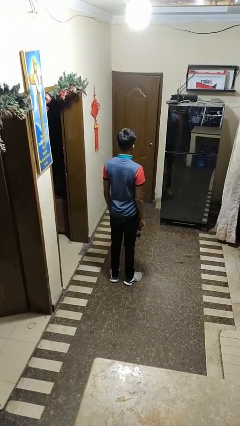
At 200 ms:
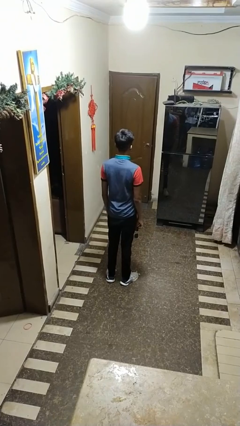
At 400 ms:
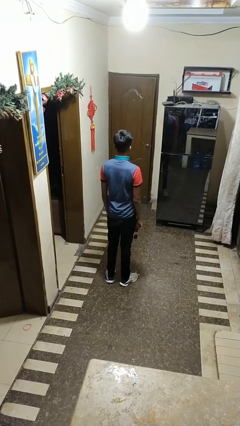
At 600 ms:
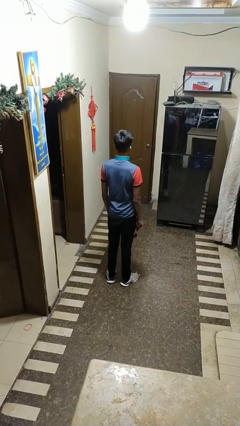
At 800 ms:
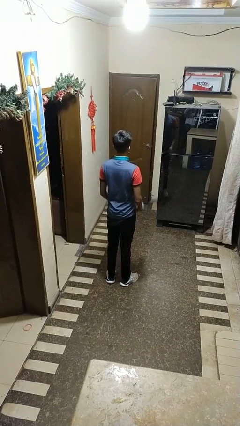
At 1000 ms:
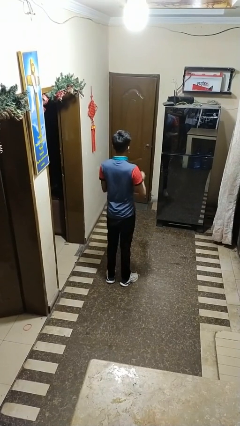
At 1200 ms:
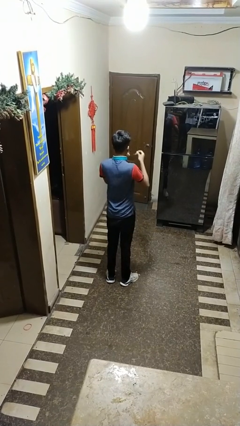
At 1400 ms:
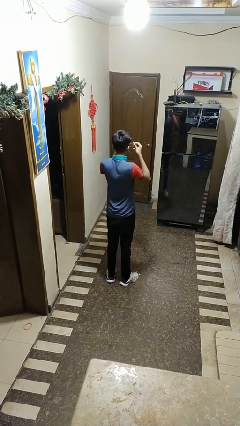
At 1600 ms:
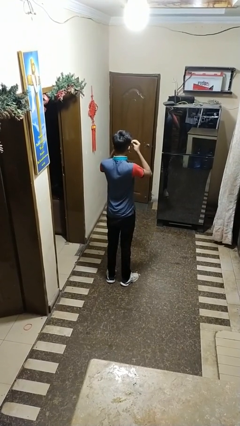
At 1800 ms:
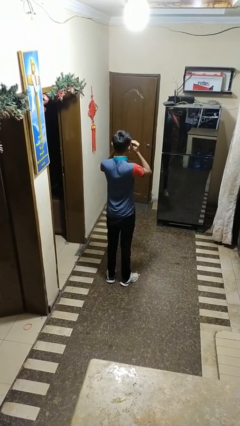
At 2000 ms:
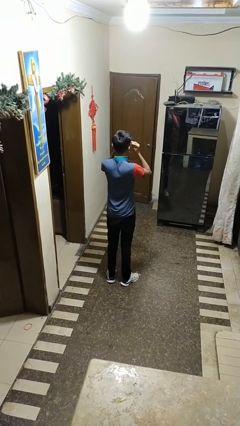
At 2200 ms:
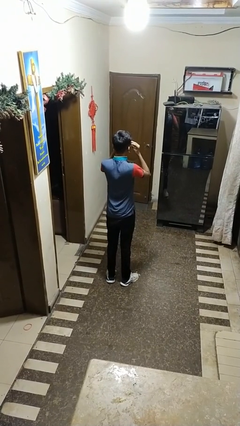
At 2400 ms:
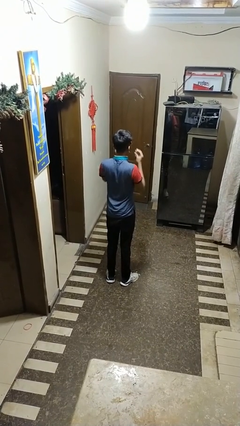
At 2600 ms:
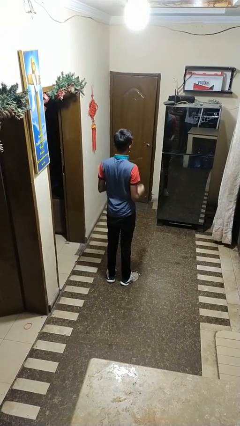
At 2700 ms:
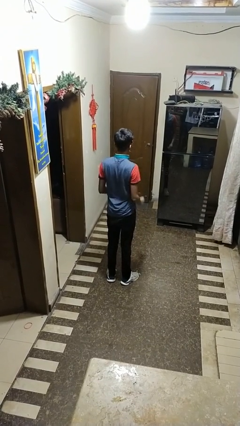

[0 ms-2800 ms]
person puts on sunglasses

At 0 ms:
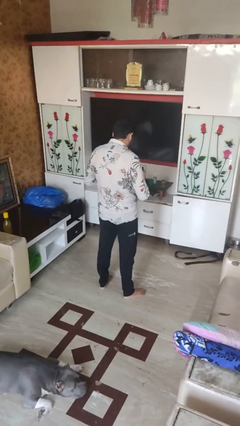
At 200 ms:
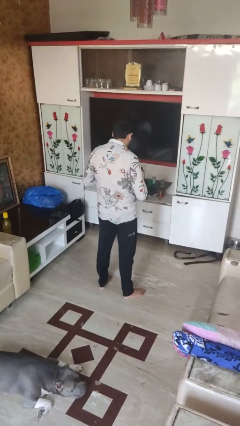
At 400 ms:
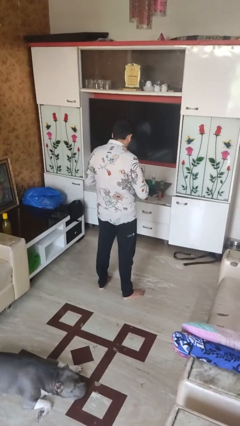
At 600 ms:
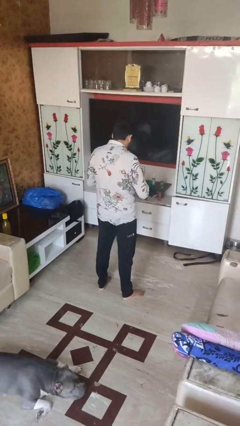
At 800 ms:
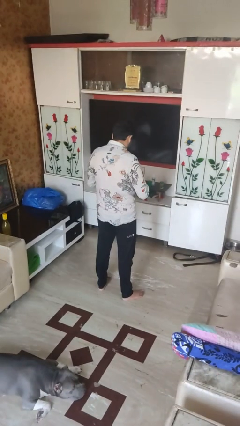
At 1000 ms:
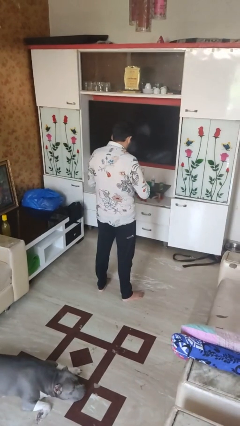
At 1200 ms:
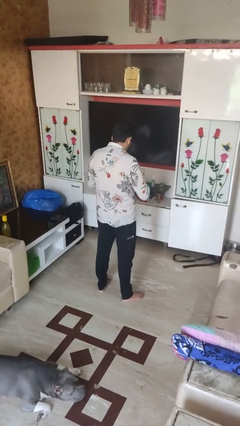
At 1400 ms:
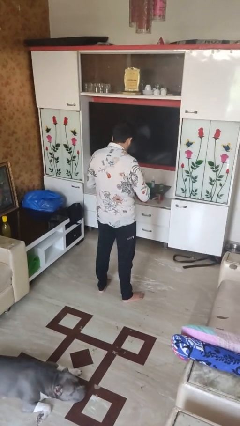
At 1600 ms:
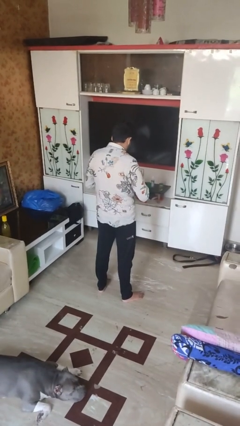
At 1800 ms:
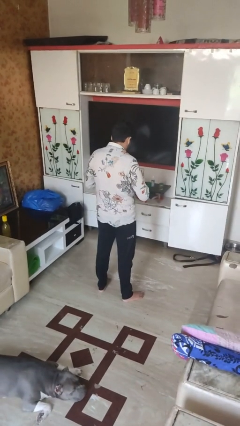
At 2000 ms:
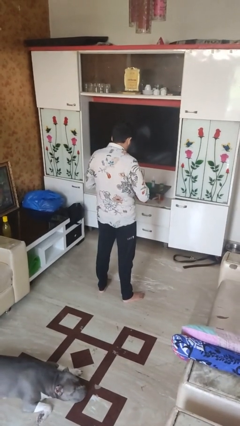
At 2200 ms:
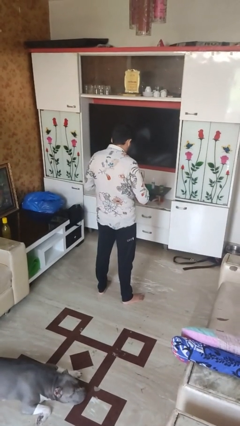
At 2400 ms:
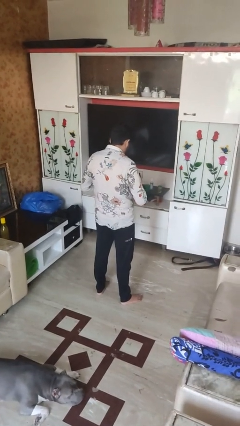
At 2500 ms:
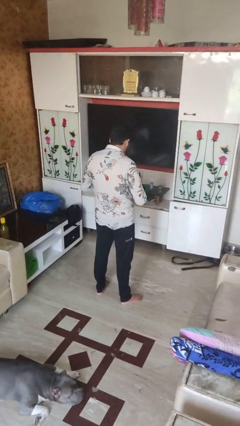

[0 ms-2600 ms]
person unbuttons shirt

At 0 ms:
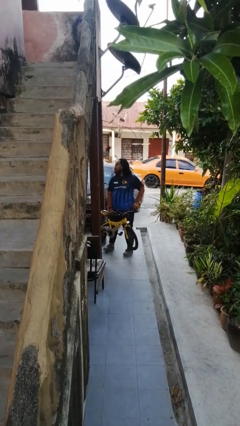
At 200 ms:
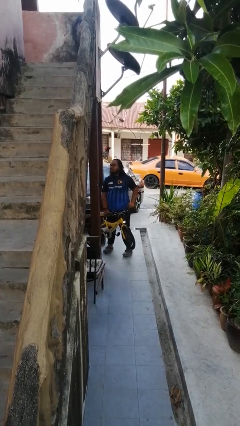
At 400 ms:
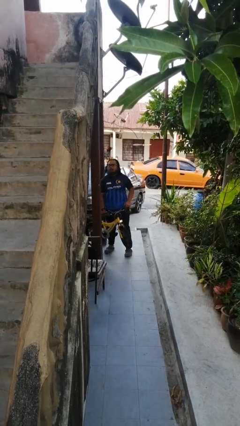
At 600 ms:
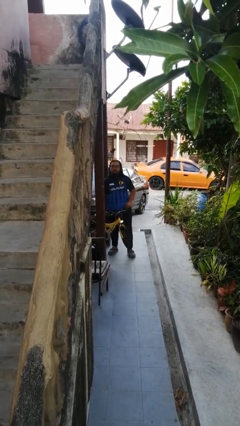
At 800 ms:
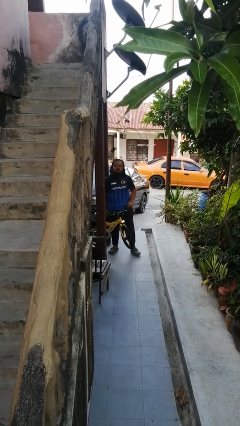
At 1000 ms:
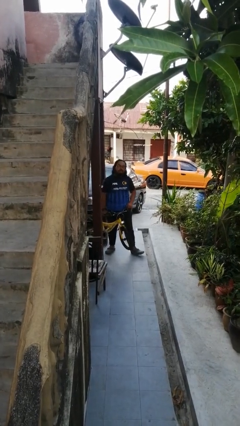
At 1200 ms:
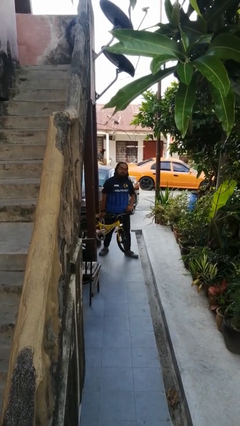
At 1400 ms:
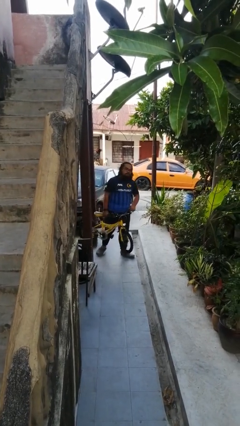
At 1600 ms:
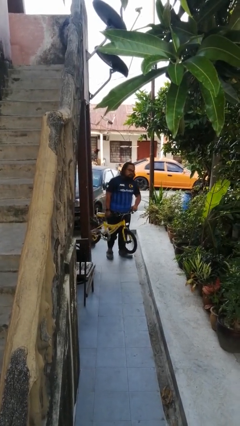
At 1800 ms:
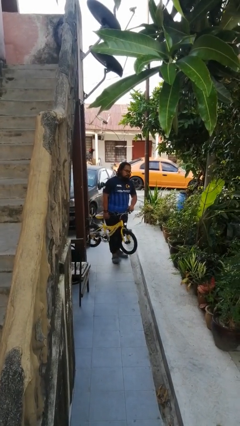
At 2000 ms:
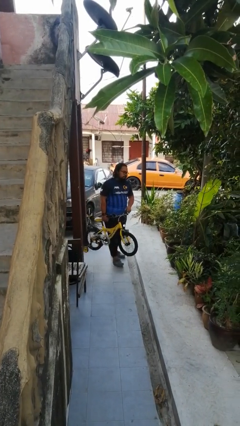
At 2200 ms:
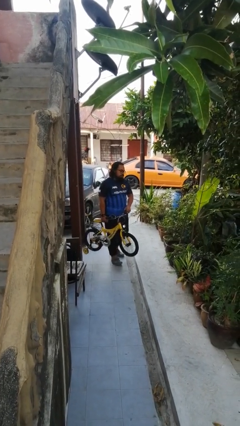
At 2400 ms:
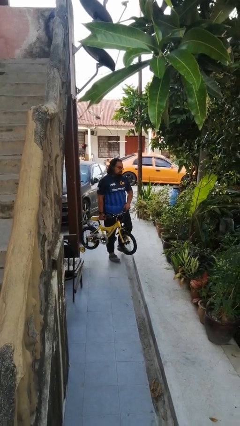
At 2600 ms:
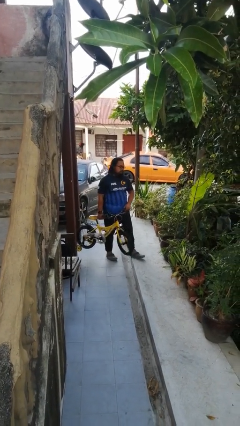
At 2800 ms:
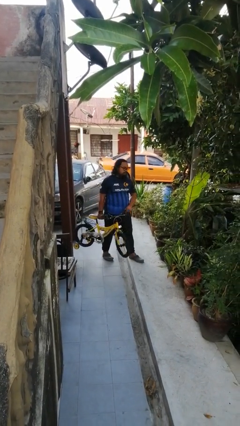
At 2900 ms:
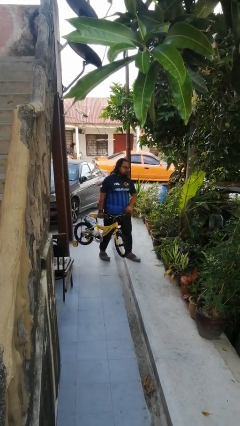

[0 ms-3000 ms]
person carries bicycle

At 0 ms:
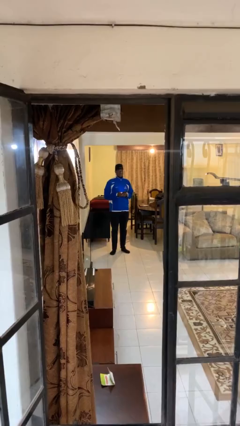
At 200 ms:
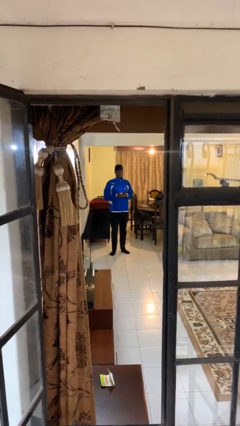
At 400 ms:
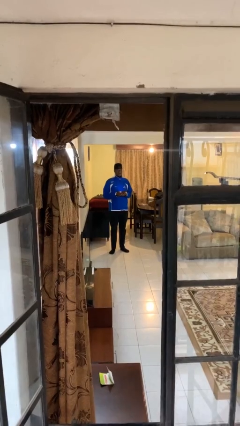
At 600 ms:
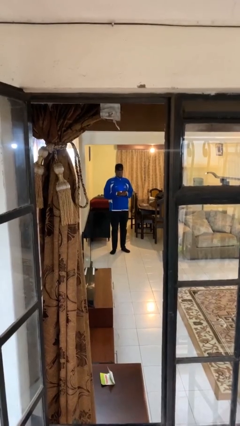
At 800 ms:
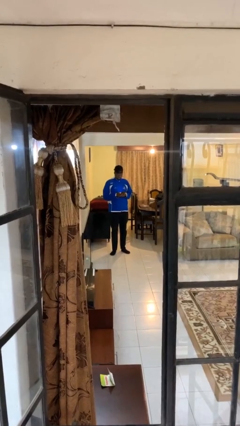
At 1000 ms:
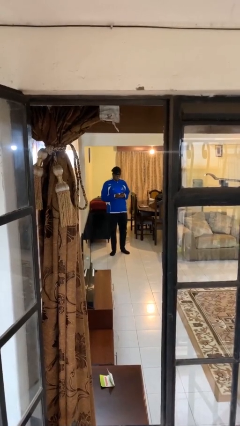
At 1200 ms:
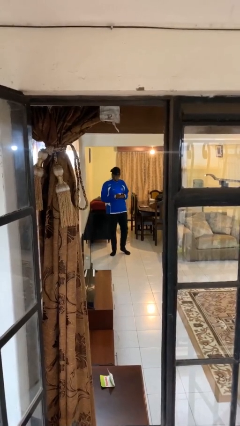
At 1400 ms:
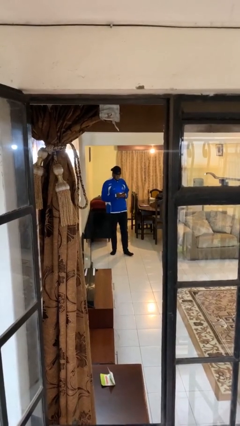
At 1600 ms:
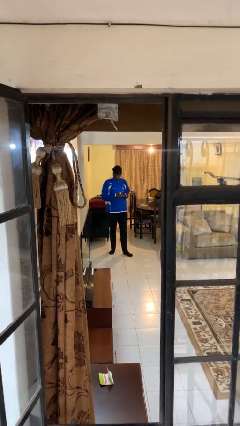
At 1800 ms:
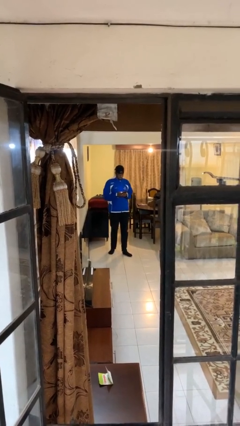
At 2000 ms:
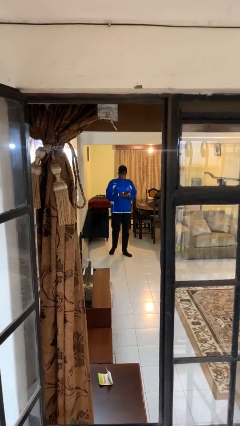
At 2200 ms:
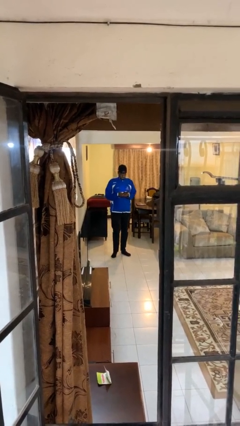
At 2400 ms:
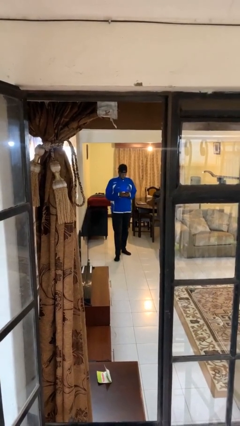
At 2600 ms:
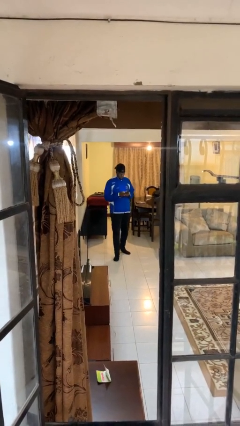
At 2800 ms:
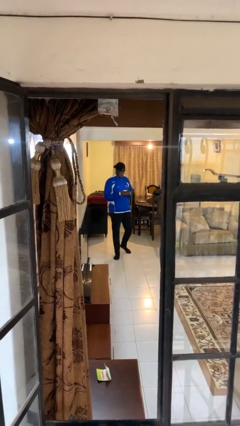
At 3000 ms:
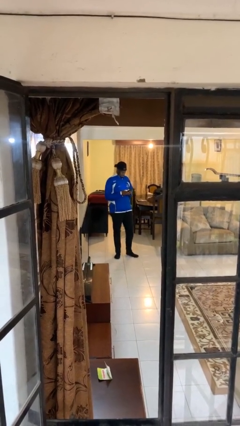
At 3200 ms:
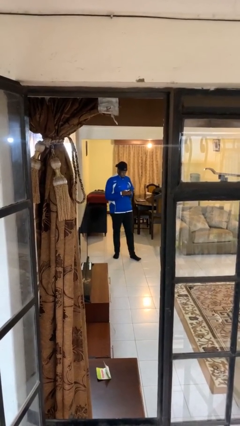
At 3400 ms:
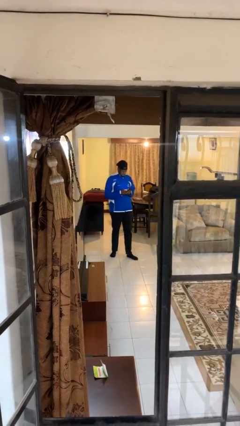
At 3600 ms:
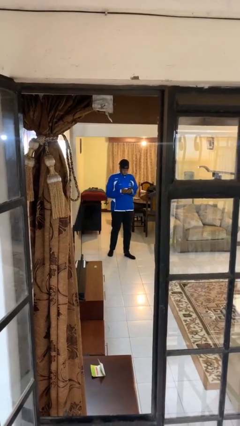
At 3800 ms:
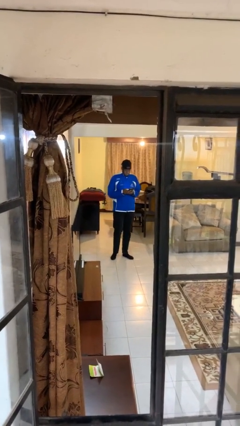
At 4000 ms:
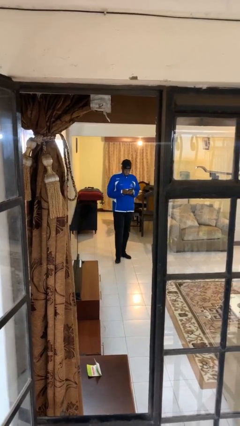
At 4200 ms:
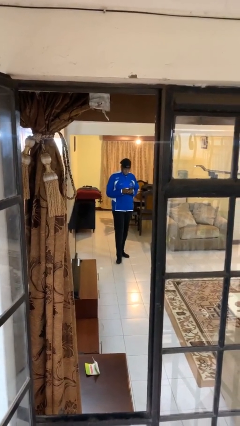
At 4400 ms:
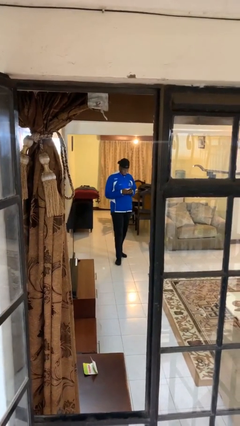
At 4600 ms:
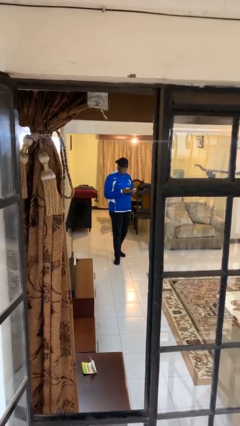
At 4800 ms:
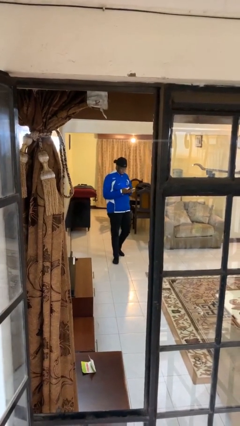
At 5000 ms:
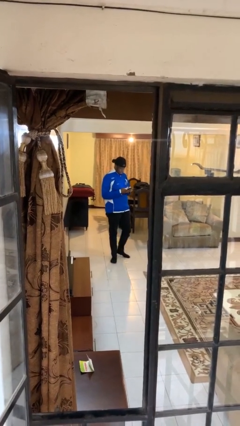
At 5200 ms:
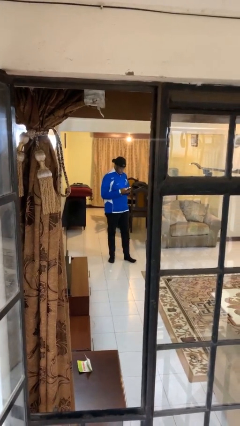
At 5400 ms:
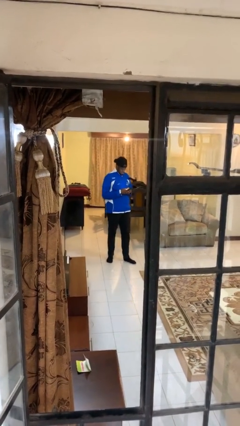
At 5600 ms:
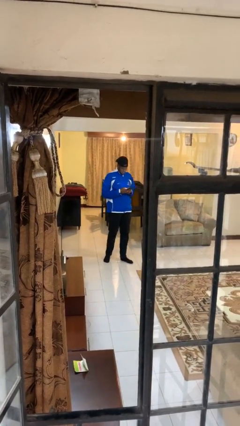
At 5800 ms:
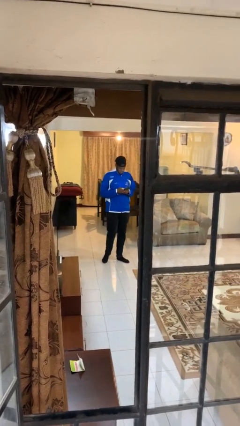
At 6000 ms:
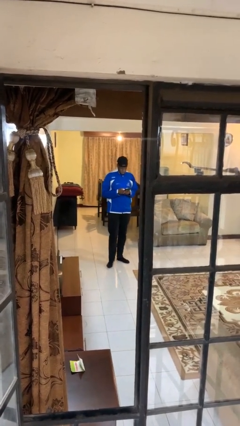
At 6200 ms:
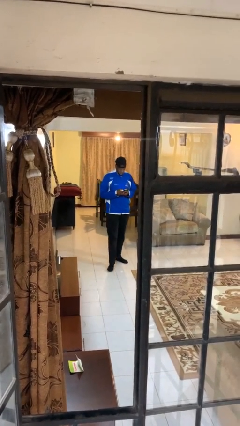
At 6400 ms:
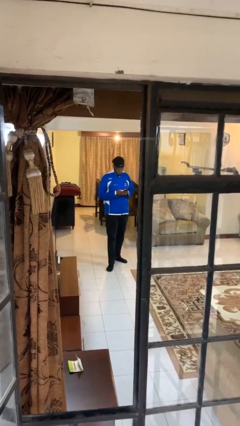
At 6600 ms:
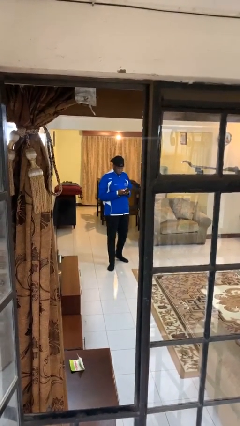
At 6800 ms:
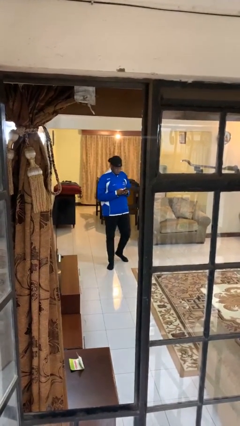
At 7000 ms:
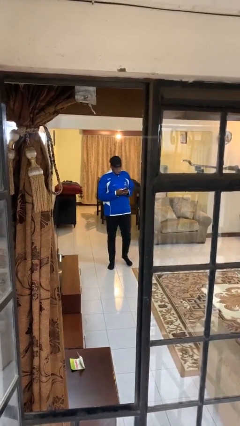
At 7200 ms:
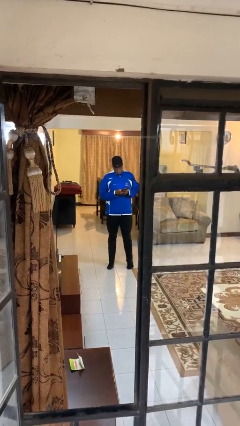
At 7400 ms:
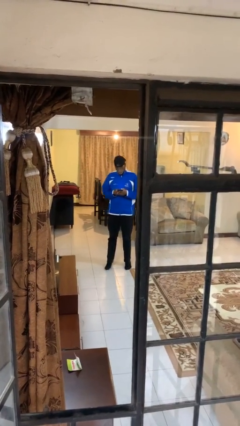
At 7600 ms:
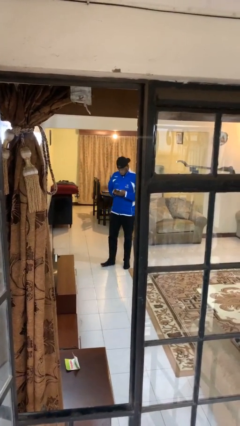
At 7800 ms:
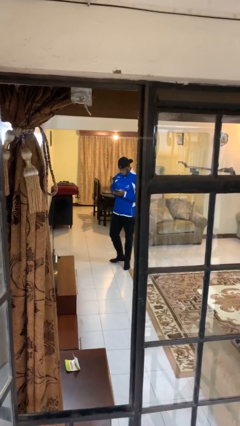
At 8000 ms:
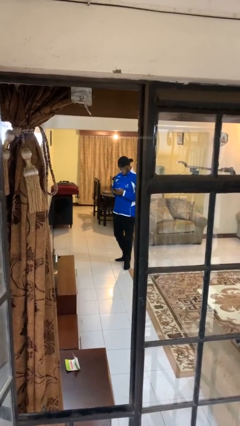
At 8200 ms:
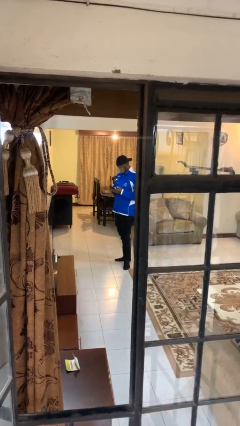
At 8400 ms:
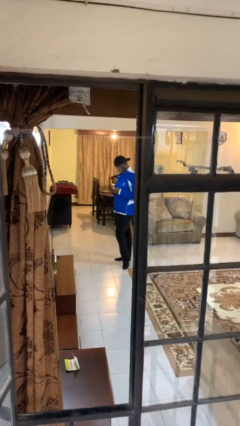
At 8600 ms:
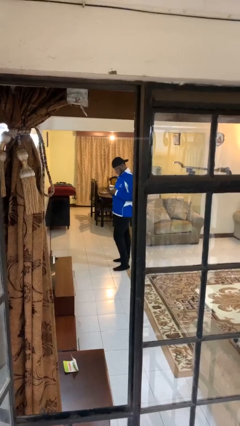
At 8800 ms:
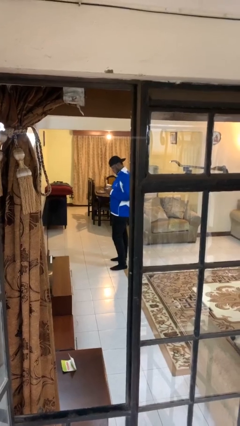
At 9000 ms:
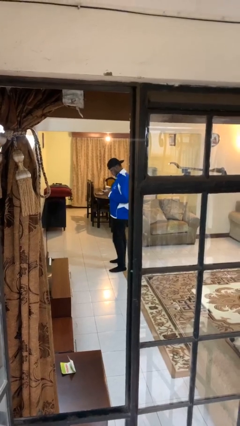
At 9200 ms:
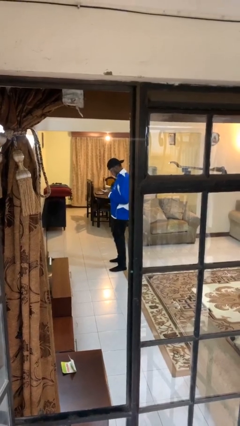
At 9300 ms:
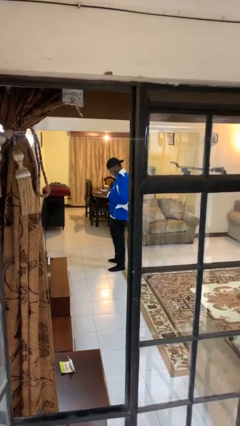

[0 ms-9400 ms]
person texts on phone
